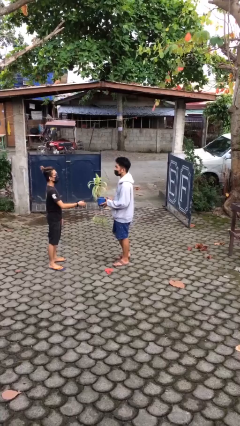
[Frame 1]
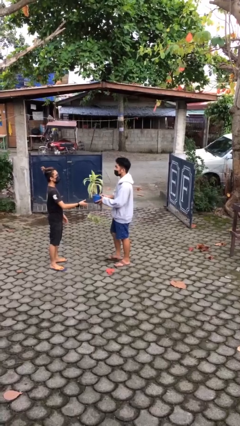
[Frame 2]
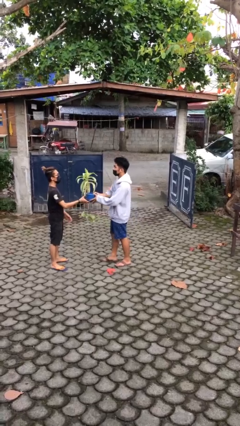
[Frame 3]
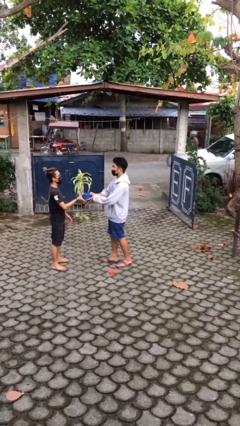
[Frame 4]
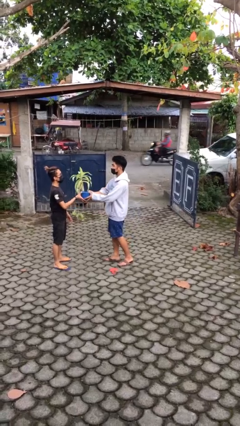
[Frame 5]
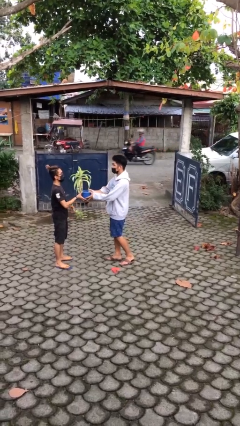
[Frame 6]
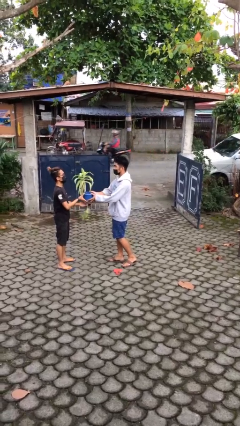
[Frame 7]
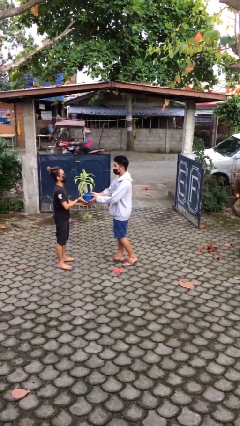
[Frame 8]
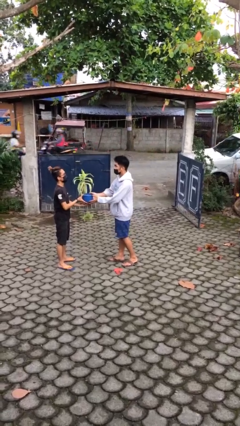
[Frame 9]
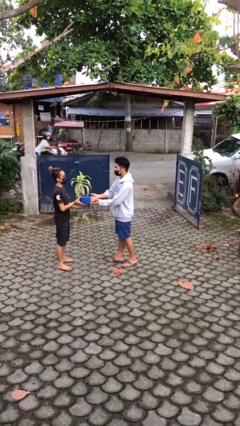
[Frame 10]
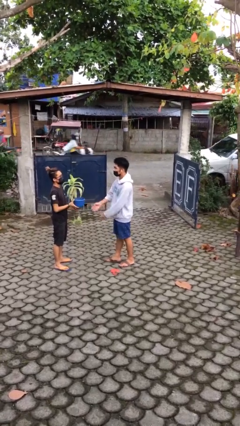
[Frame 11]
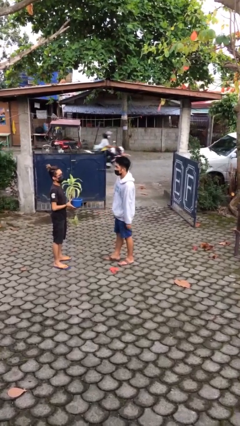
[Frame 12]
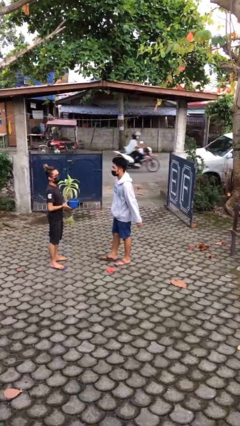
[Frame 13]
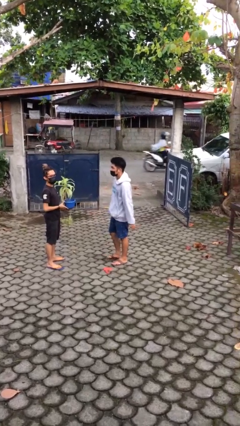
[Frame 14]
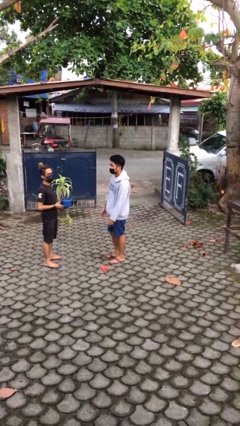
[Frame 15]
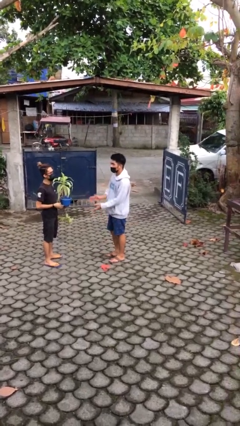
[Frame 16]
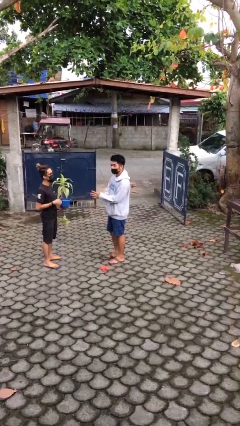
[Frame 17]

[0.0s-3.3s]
person transfers object to person

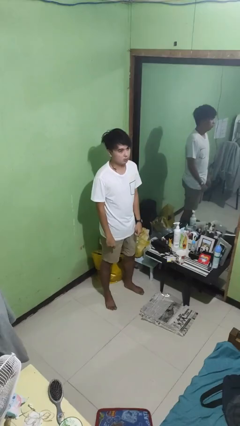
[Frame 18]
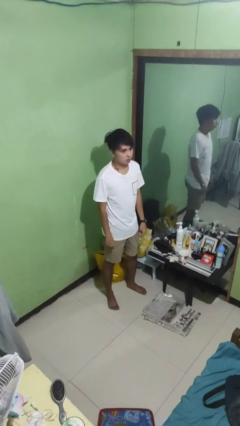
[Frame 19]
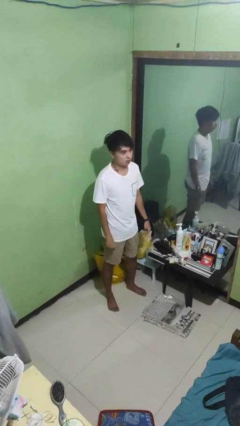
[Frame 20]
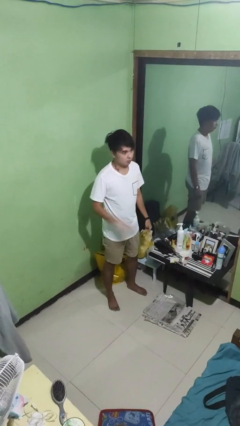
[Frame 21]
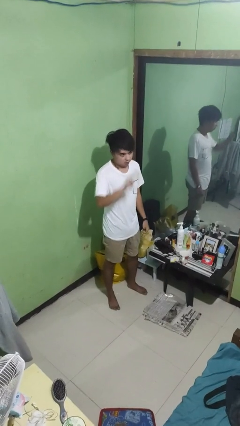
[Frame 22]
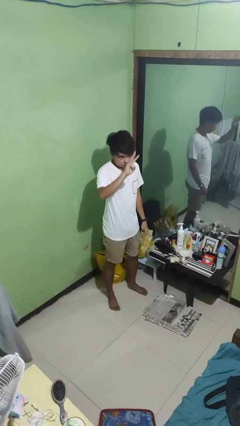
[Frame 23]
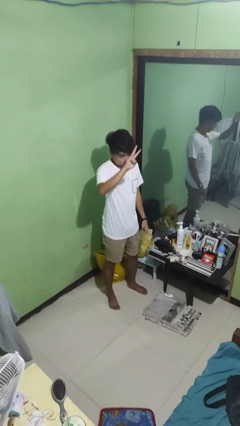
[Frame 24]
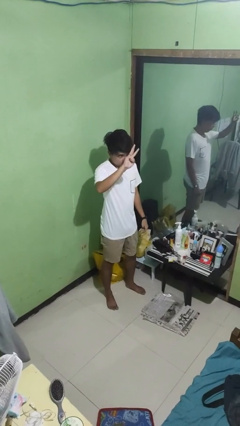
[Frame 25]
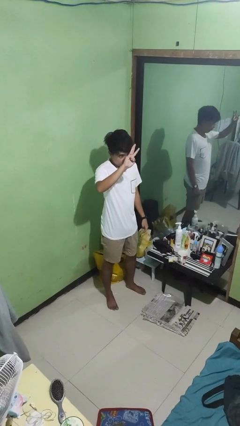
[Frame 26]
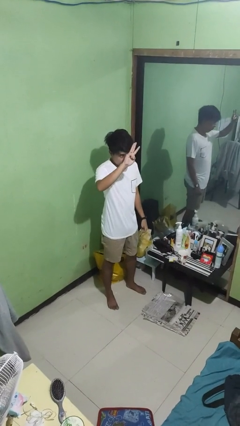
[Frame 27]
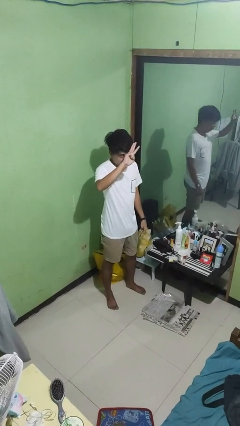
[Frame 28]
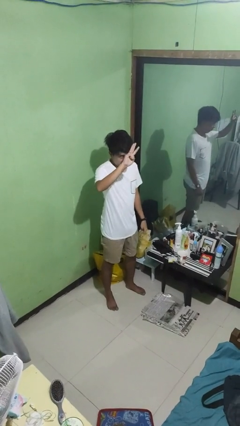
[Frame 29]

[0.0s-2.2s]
person gestures number three

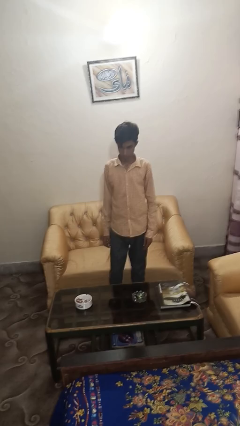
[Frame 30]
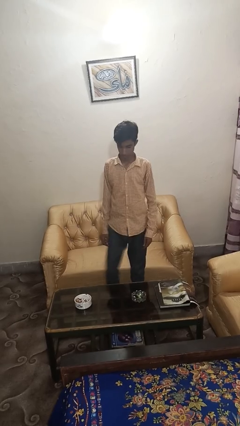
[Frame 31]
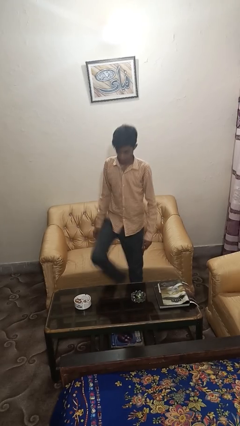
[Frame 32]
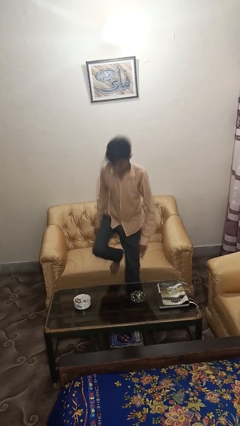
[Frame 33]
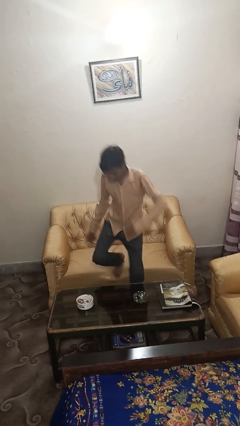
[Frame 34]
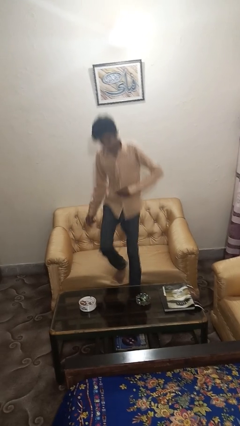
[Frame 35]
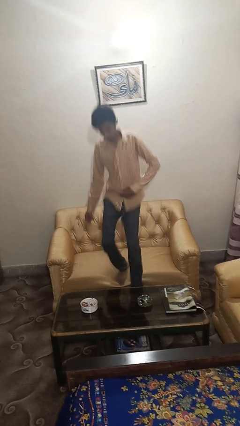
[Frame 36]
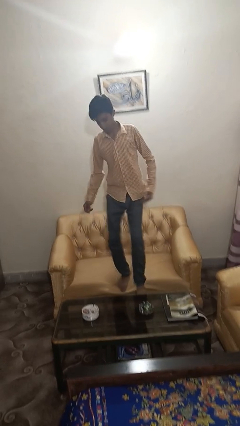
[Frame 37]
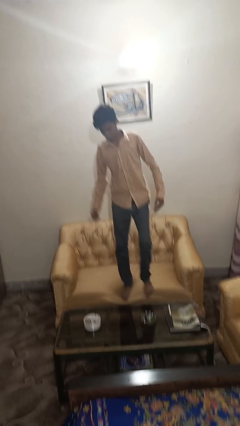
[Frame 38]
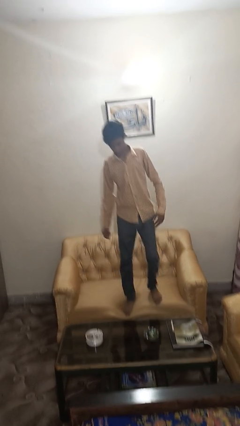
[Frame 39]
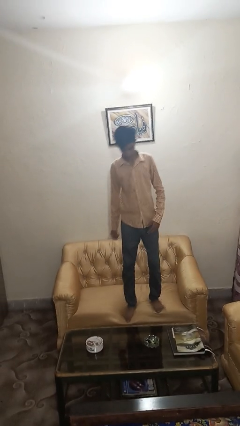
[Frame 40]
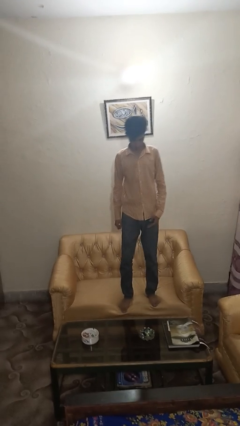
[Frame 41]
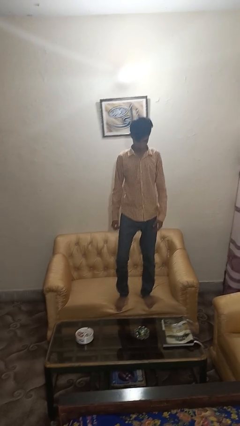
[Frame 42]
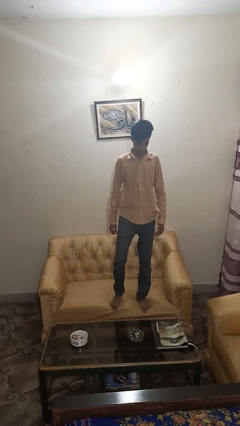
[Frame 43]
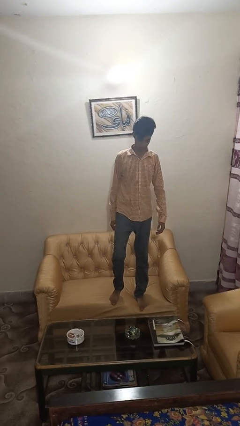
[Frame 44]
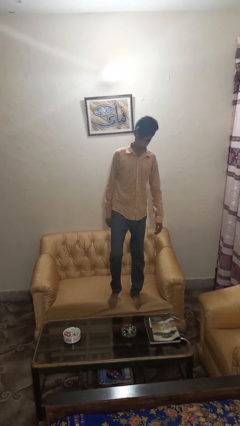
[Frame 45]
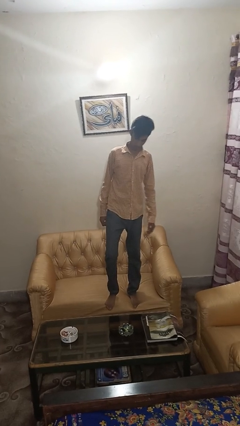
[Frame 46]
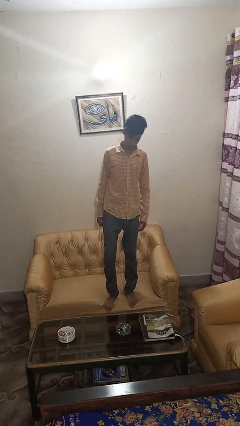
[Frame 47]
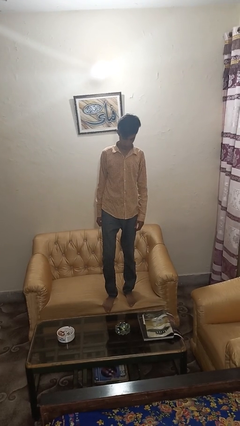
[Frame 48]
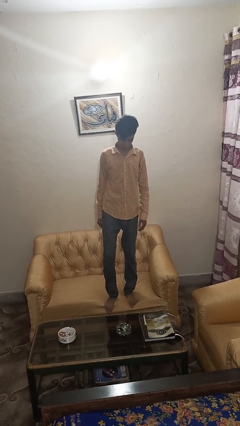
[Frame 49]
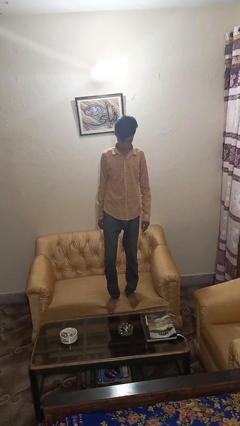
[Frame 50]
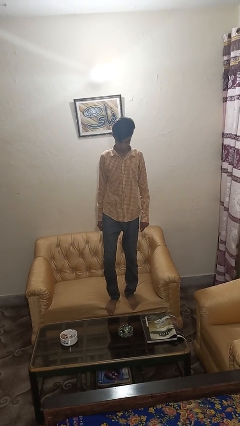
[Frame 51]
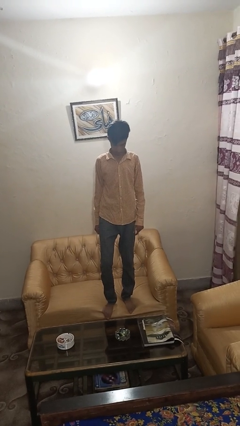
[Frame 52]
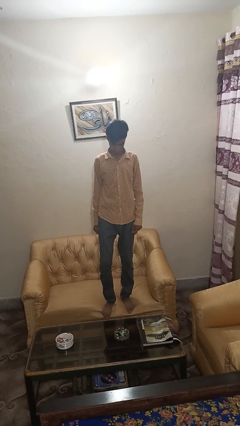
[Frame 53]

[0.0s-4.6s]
person climbs on couch

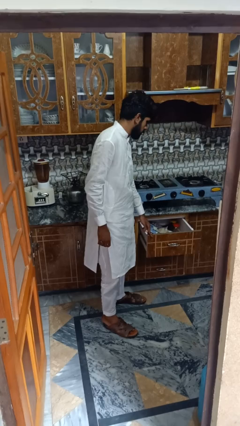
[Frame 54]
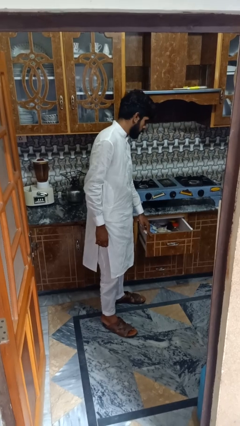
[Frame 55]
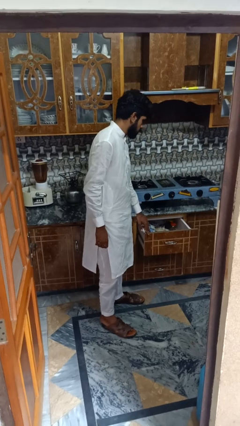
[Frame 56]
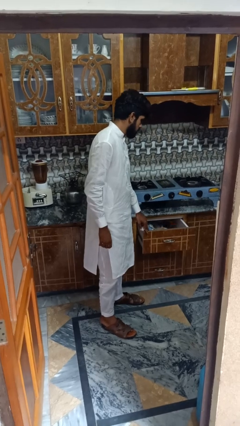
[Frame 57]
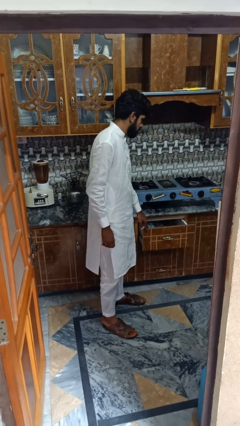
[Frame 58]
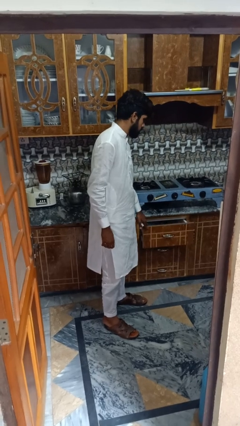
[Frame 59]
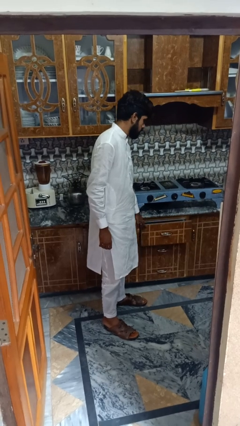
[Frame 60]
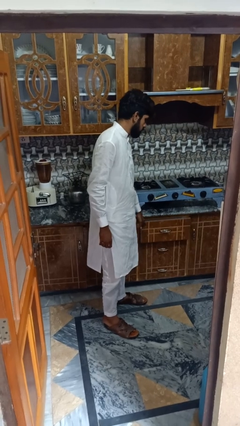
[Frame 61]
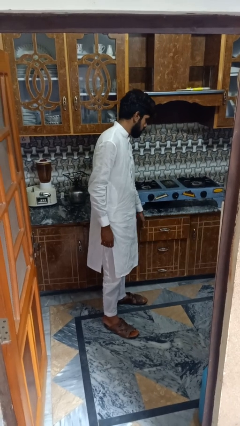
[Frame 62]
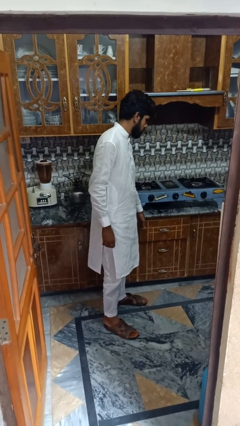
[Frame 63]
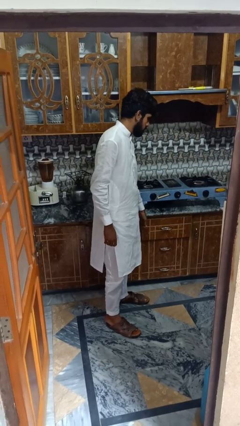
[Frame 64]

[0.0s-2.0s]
person closes kitchen drawer

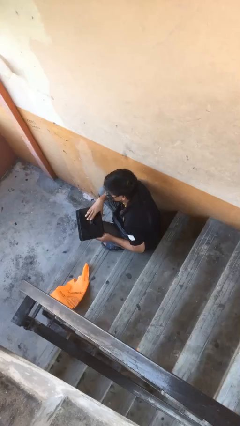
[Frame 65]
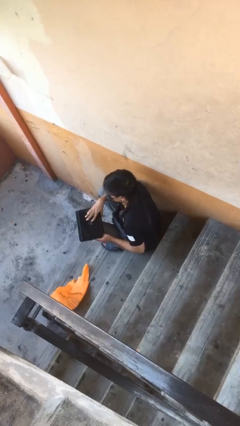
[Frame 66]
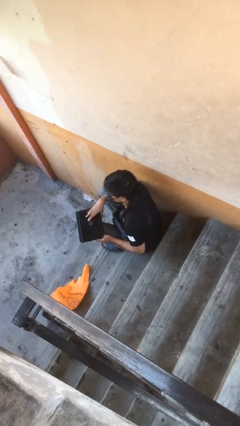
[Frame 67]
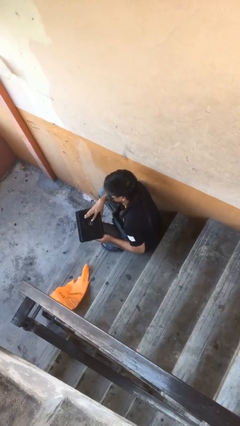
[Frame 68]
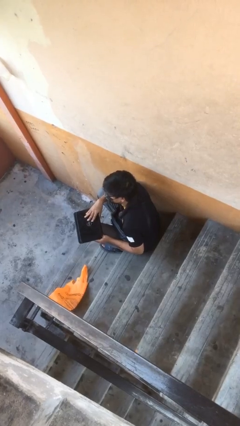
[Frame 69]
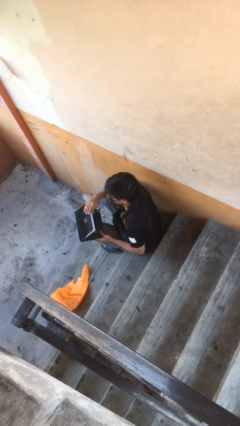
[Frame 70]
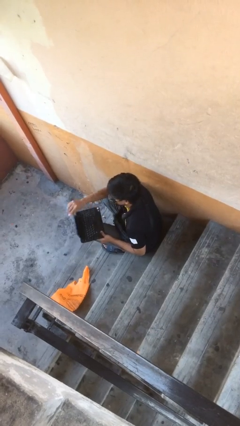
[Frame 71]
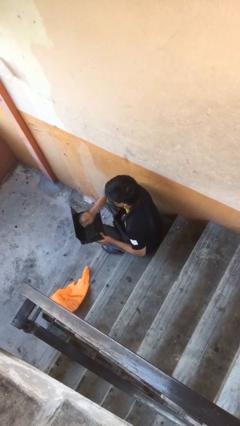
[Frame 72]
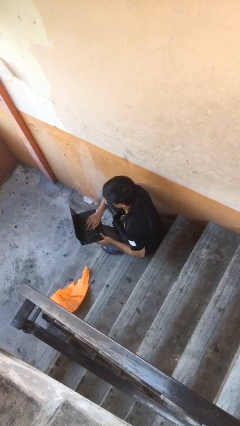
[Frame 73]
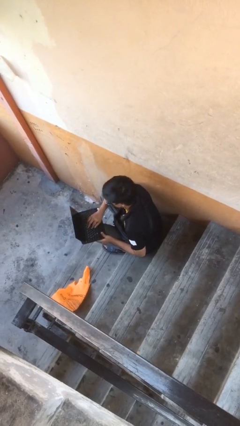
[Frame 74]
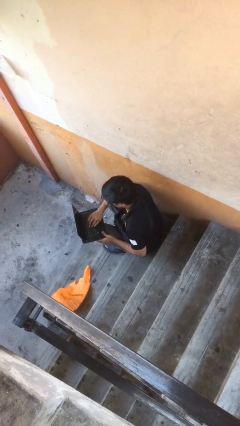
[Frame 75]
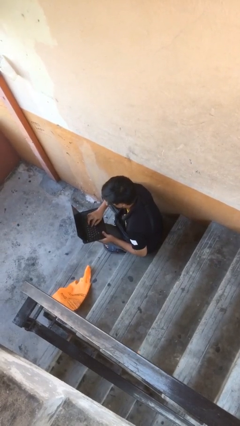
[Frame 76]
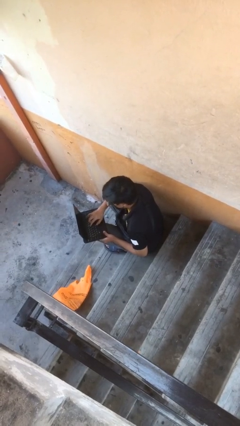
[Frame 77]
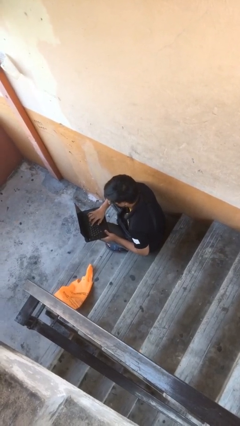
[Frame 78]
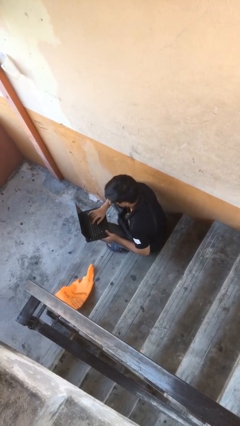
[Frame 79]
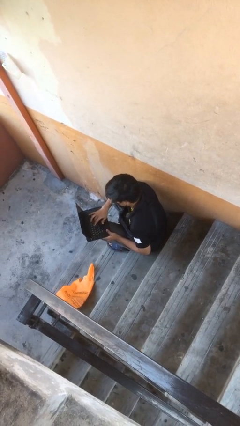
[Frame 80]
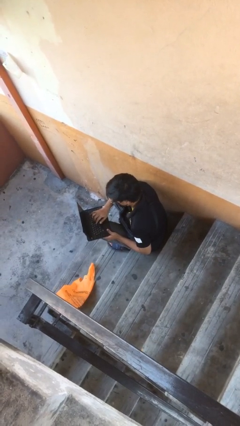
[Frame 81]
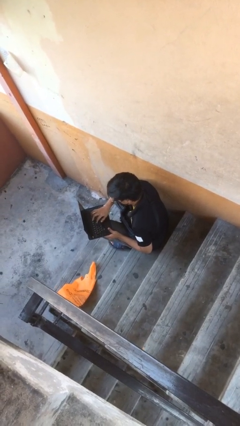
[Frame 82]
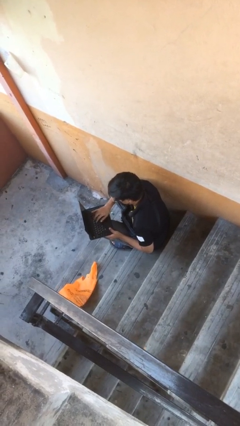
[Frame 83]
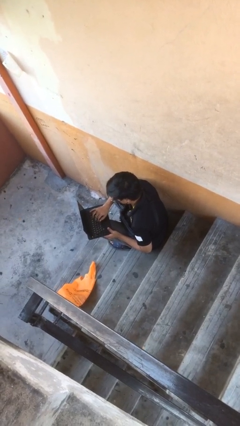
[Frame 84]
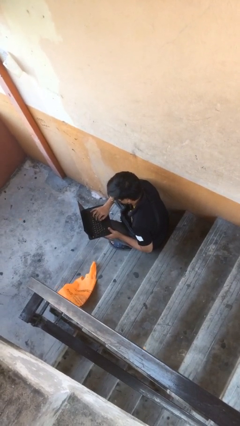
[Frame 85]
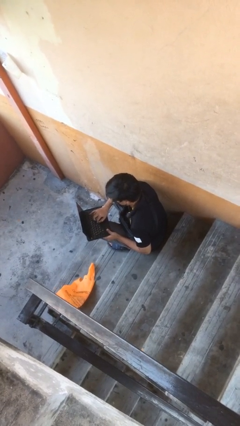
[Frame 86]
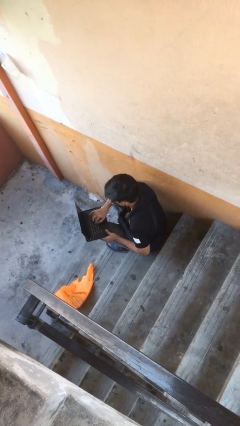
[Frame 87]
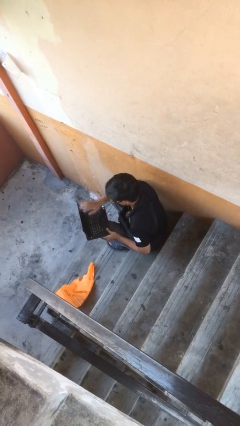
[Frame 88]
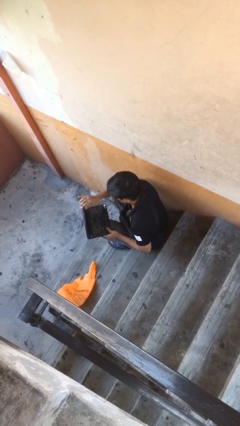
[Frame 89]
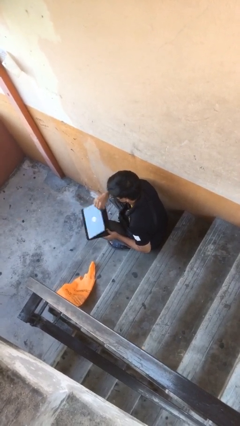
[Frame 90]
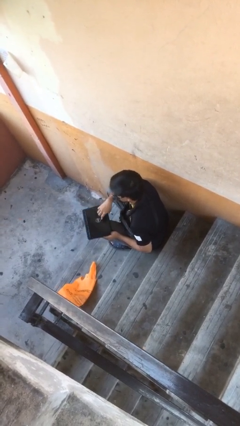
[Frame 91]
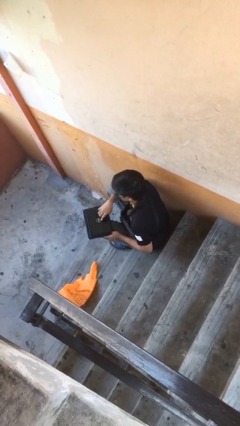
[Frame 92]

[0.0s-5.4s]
person interacts with laptop
